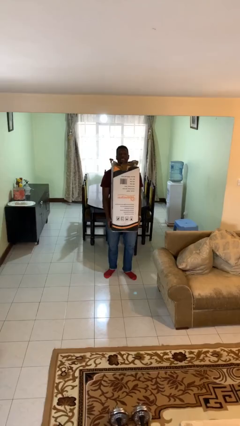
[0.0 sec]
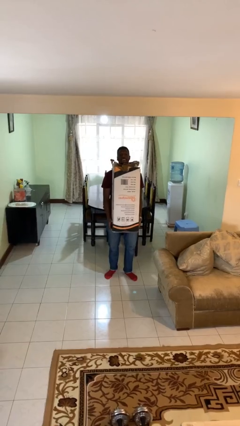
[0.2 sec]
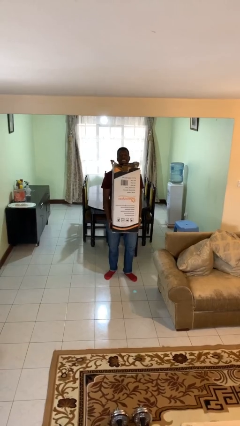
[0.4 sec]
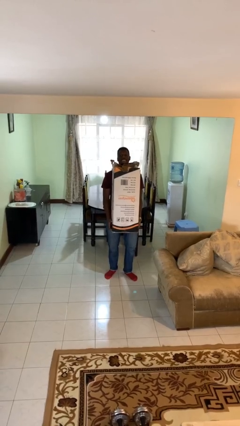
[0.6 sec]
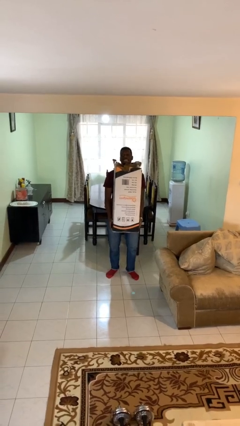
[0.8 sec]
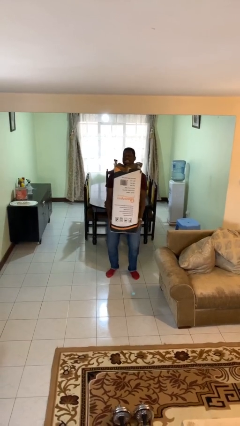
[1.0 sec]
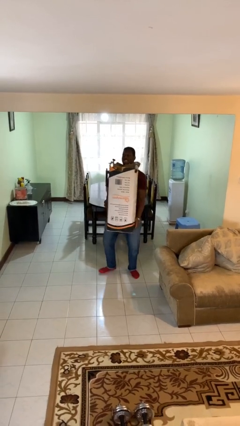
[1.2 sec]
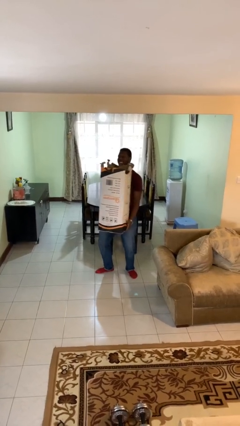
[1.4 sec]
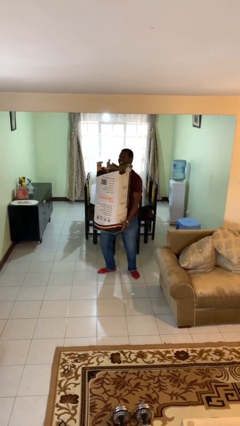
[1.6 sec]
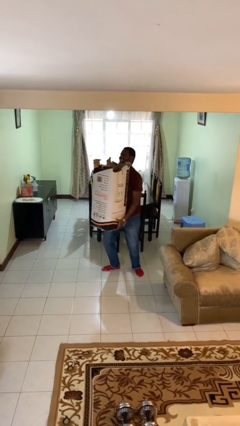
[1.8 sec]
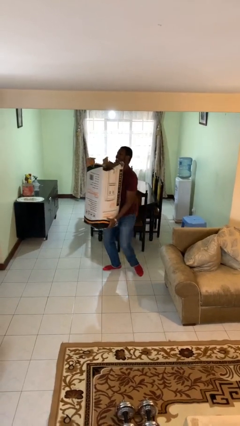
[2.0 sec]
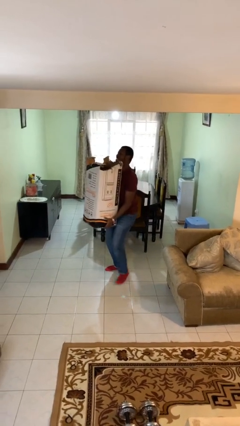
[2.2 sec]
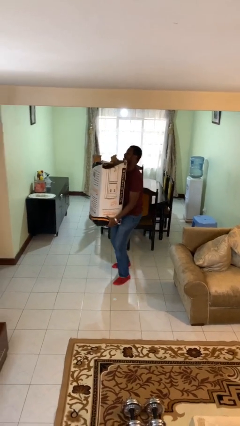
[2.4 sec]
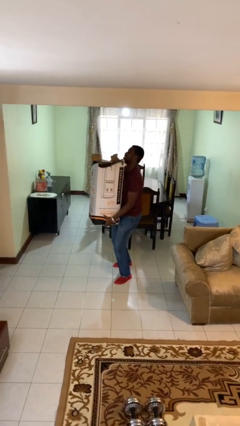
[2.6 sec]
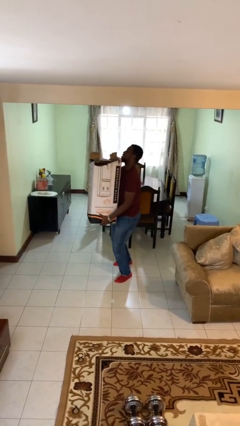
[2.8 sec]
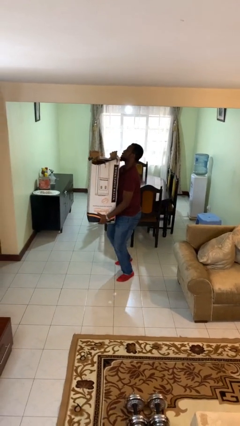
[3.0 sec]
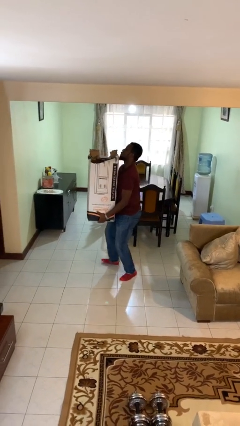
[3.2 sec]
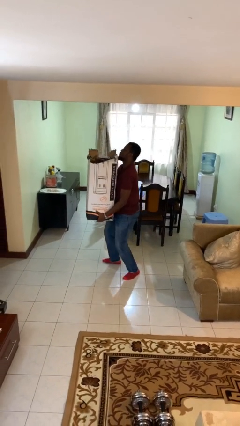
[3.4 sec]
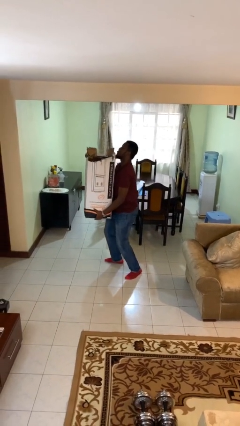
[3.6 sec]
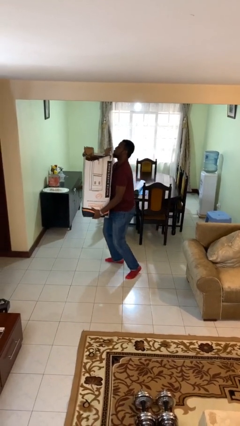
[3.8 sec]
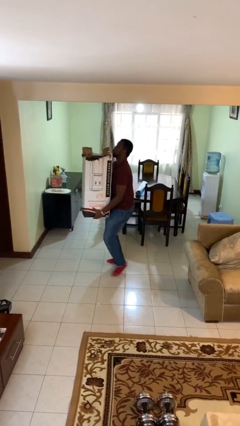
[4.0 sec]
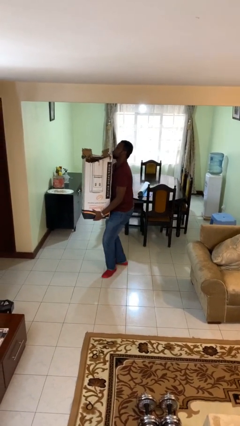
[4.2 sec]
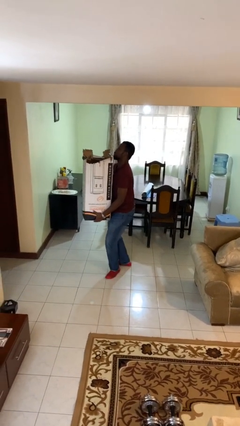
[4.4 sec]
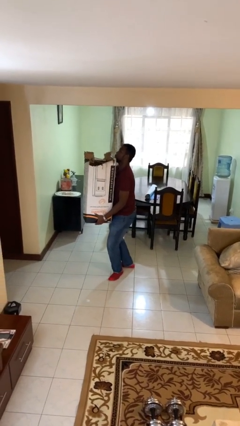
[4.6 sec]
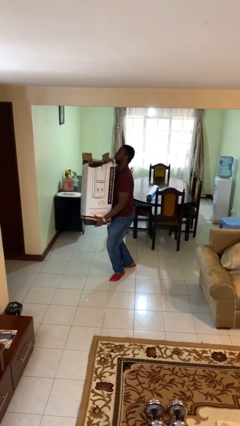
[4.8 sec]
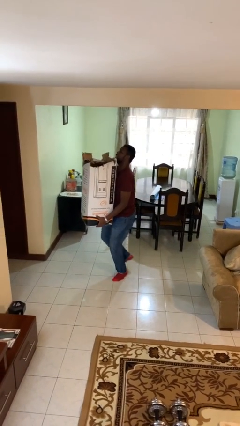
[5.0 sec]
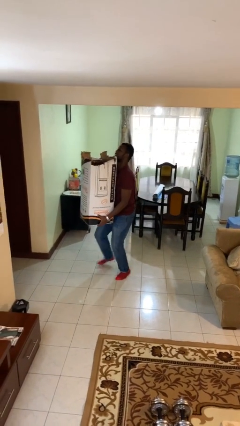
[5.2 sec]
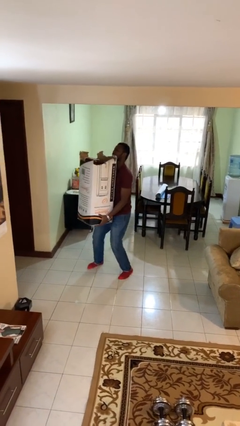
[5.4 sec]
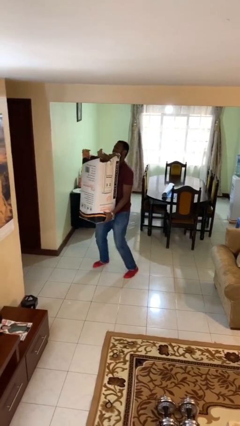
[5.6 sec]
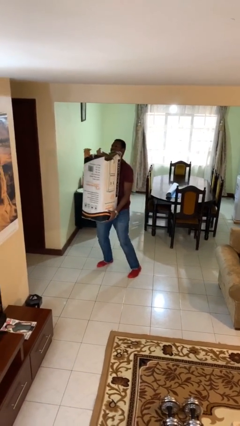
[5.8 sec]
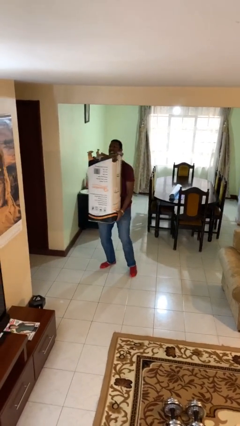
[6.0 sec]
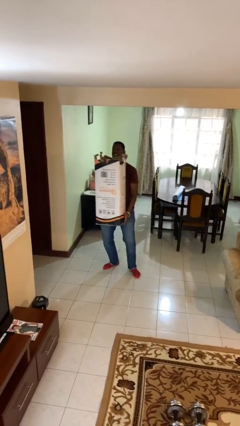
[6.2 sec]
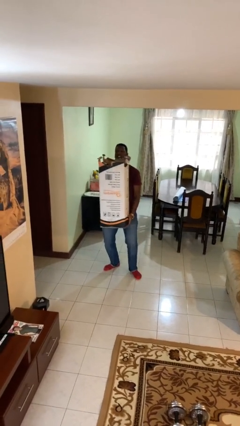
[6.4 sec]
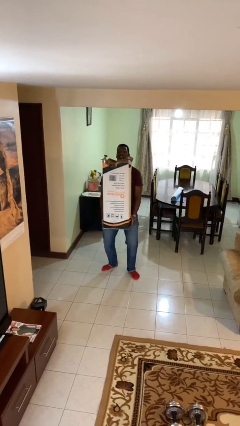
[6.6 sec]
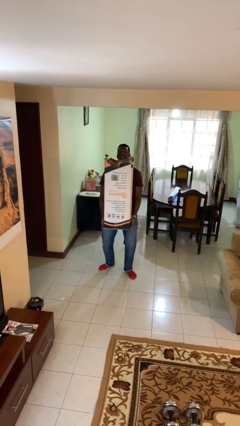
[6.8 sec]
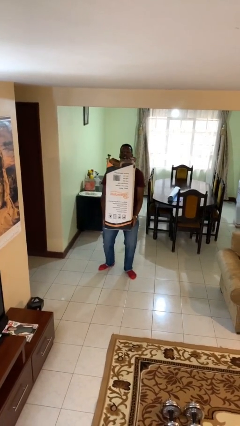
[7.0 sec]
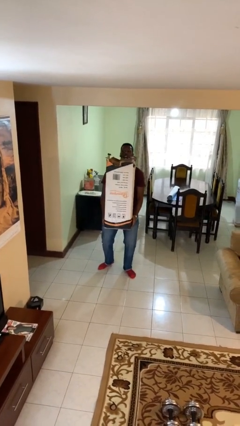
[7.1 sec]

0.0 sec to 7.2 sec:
person carries heavy object

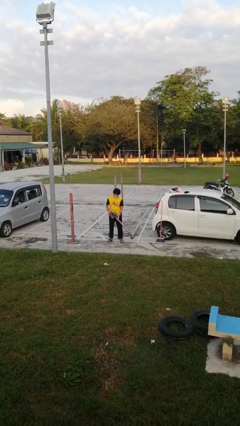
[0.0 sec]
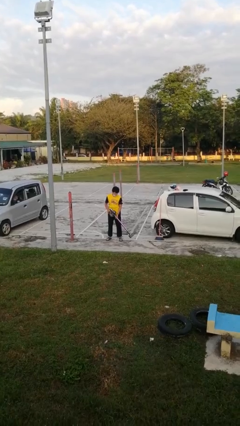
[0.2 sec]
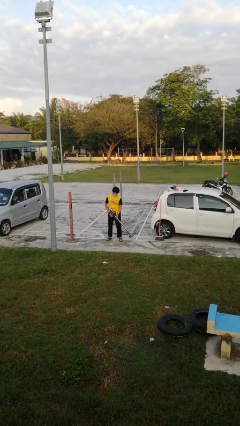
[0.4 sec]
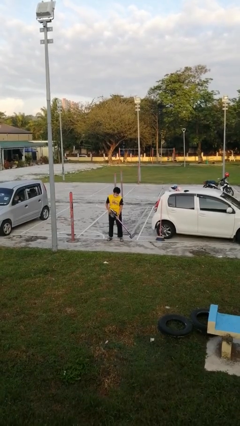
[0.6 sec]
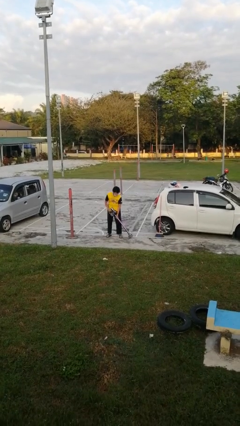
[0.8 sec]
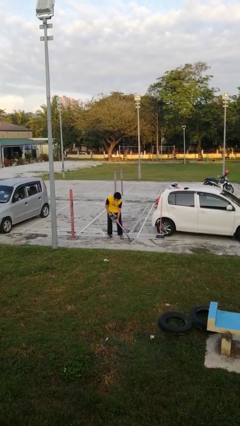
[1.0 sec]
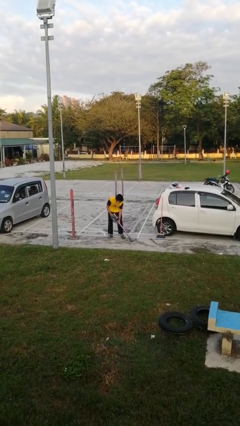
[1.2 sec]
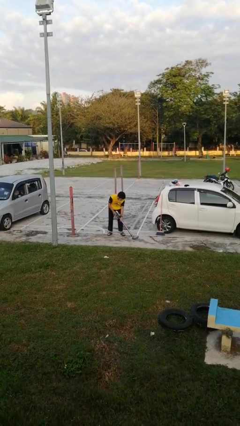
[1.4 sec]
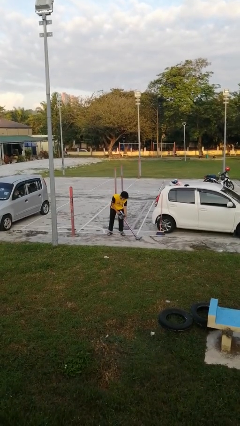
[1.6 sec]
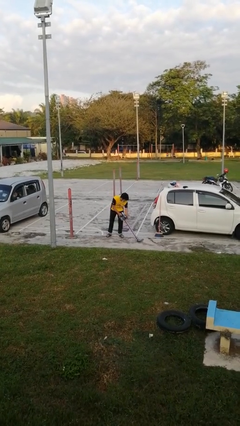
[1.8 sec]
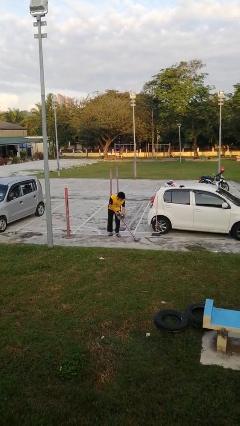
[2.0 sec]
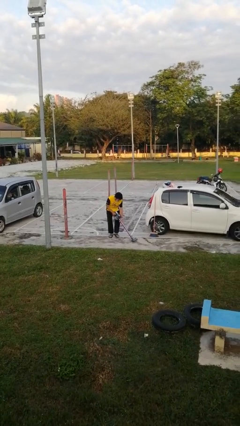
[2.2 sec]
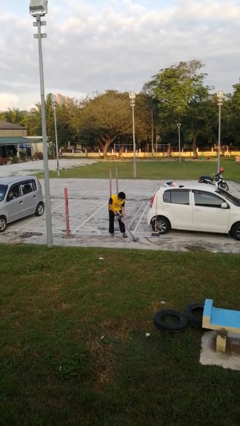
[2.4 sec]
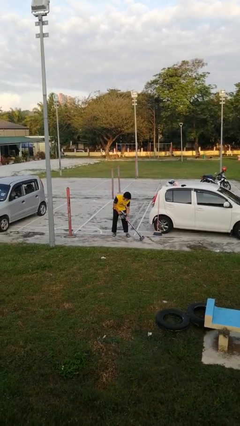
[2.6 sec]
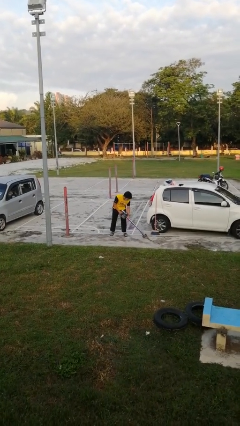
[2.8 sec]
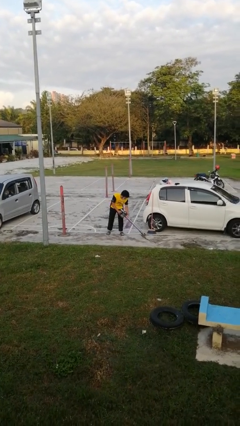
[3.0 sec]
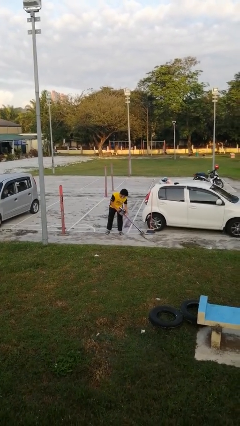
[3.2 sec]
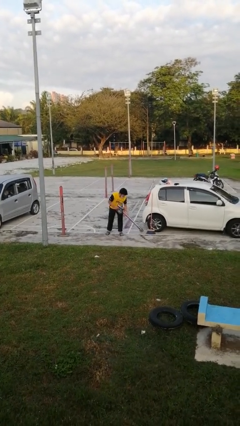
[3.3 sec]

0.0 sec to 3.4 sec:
person vacuums carpet

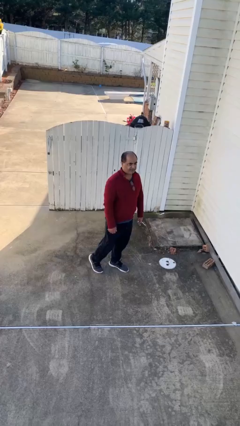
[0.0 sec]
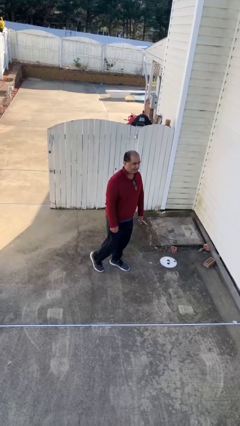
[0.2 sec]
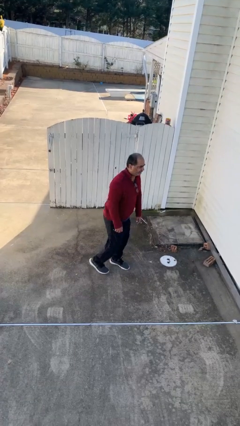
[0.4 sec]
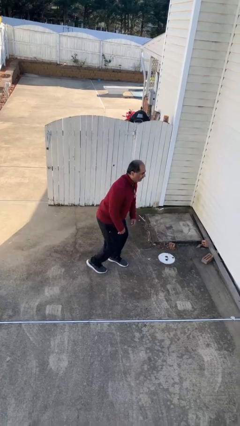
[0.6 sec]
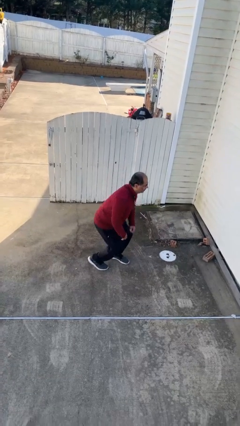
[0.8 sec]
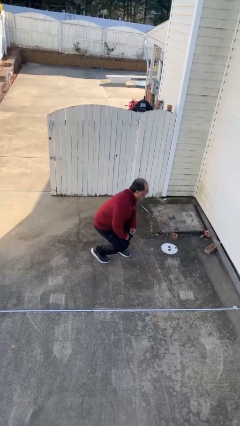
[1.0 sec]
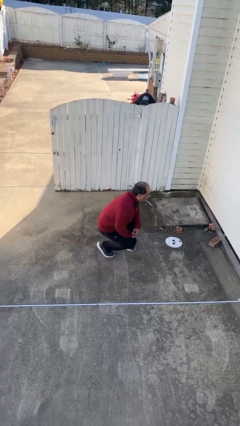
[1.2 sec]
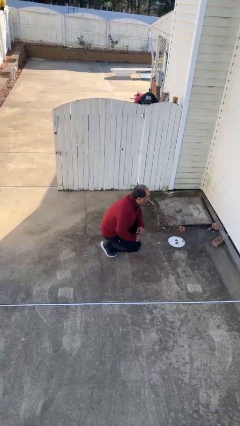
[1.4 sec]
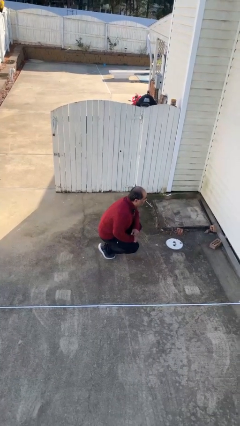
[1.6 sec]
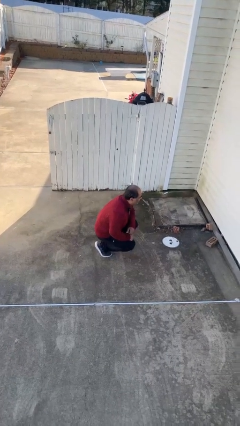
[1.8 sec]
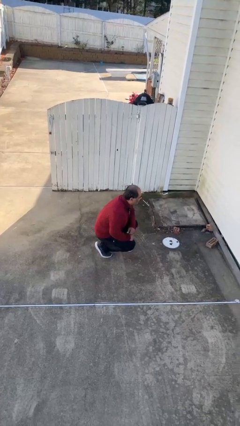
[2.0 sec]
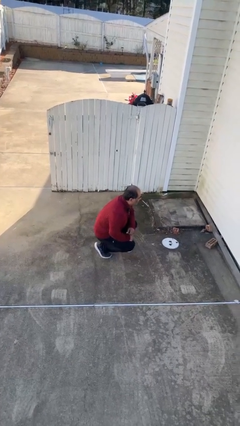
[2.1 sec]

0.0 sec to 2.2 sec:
person sits down

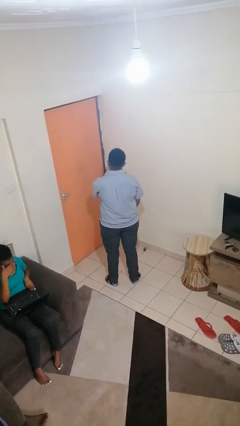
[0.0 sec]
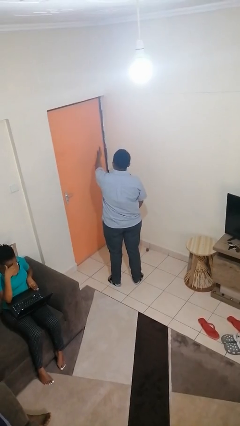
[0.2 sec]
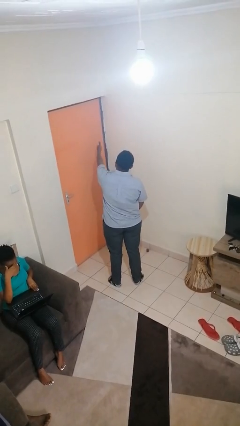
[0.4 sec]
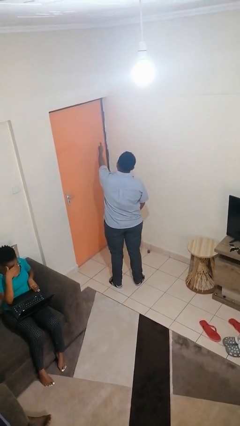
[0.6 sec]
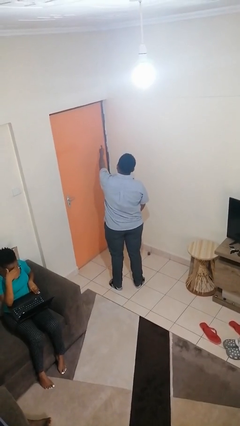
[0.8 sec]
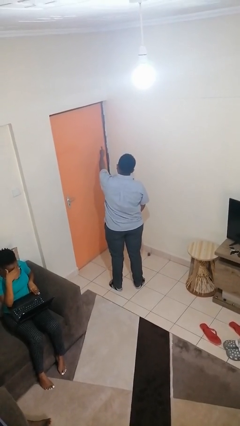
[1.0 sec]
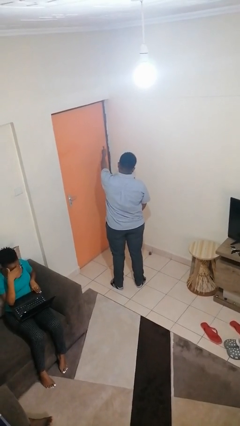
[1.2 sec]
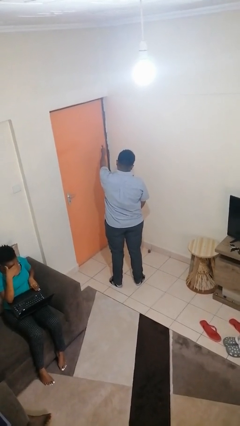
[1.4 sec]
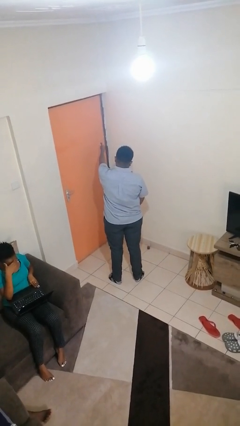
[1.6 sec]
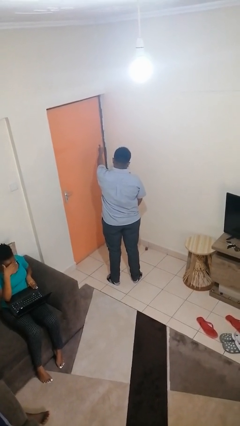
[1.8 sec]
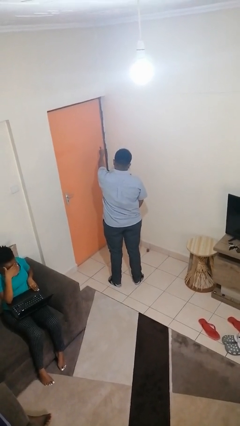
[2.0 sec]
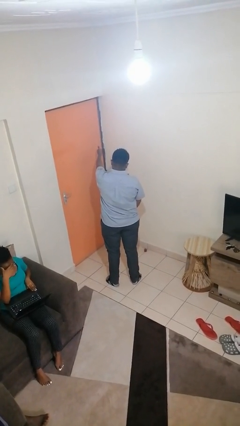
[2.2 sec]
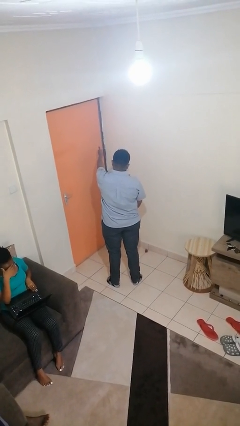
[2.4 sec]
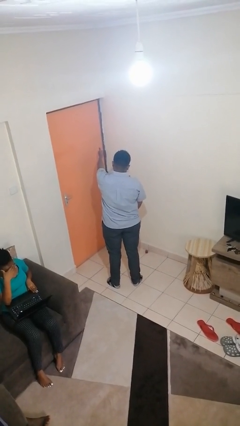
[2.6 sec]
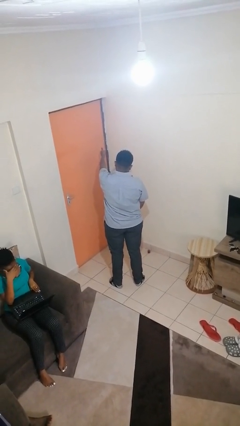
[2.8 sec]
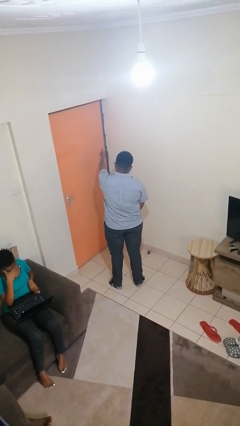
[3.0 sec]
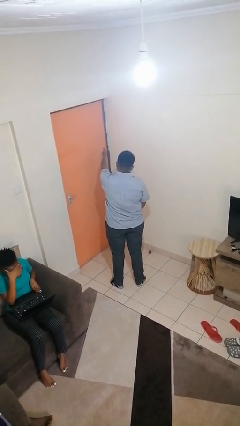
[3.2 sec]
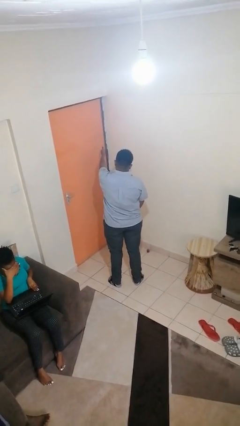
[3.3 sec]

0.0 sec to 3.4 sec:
person gestures thumbs up

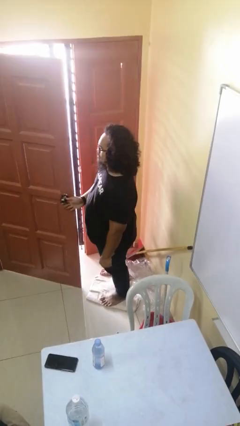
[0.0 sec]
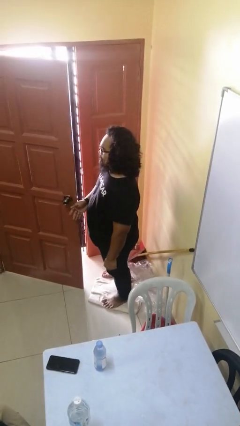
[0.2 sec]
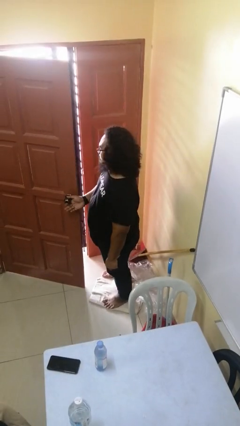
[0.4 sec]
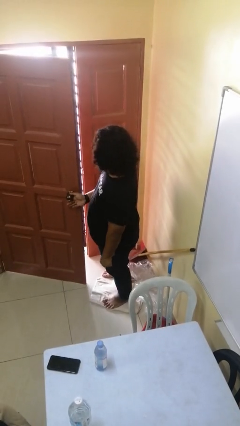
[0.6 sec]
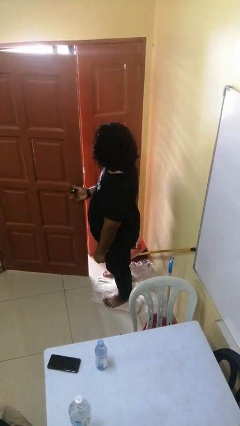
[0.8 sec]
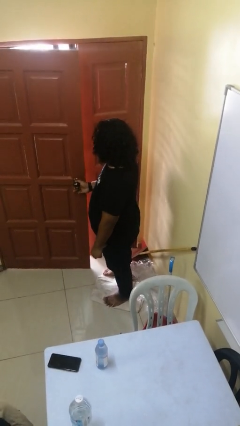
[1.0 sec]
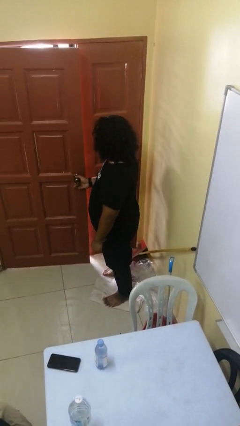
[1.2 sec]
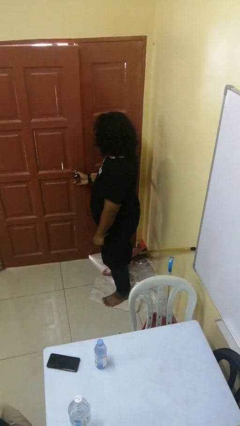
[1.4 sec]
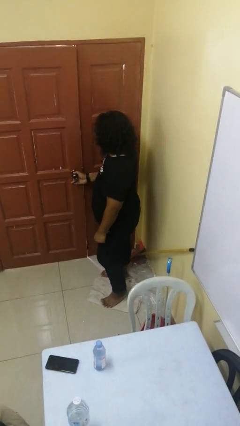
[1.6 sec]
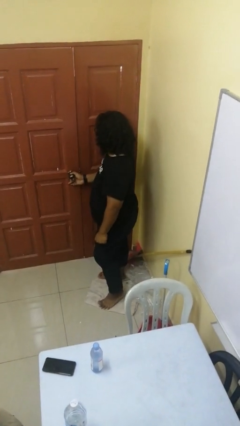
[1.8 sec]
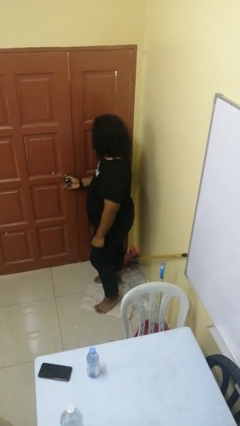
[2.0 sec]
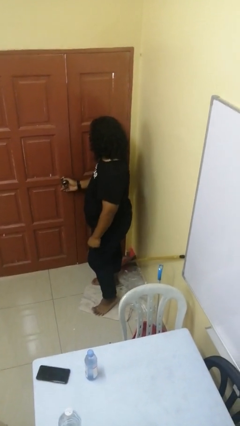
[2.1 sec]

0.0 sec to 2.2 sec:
person closes facility door
